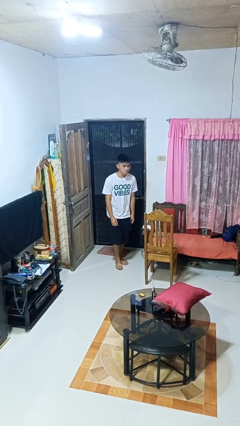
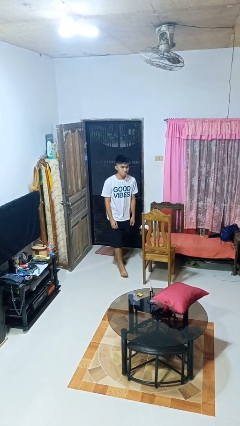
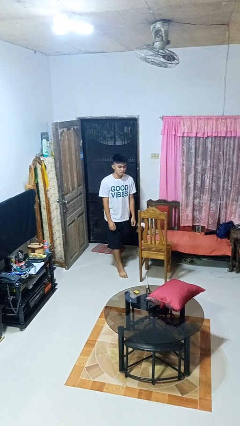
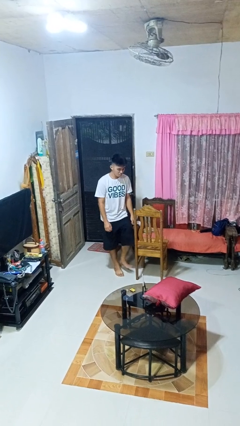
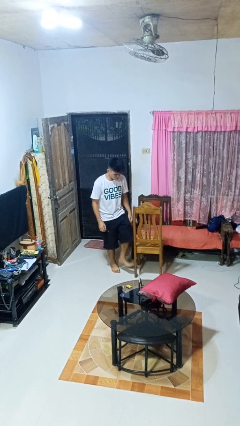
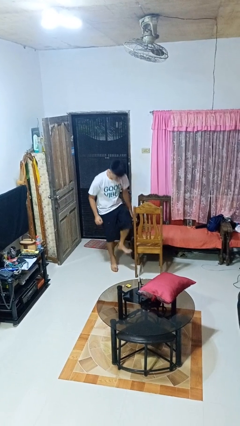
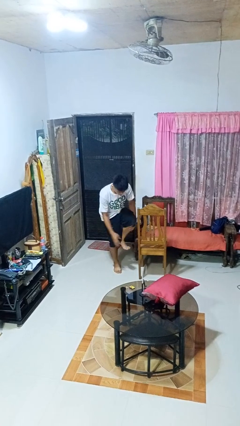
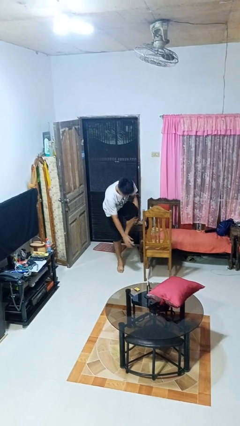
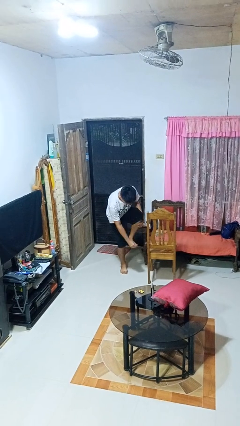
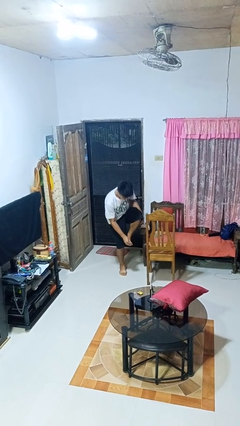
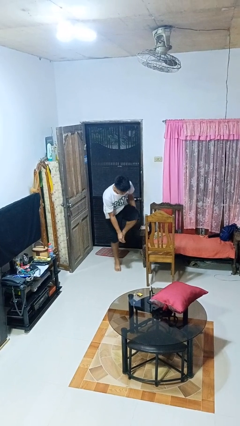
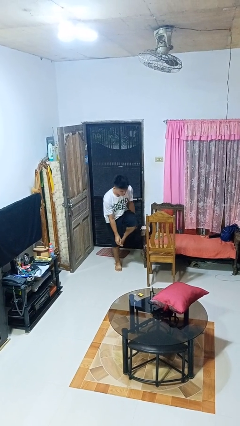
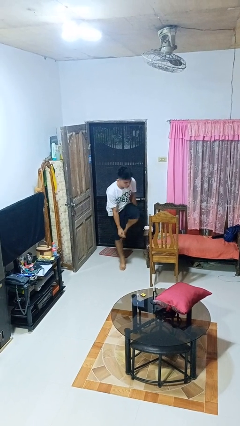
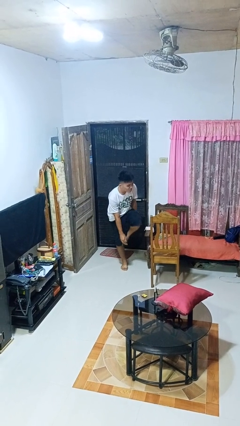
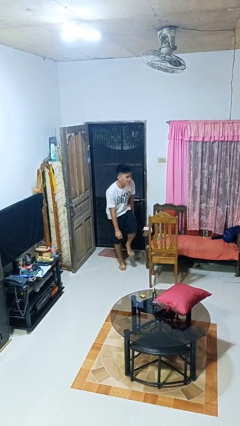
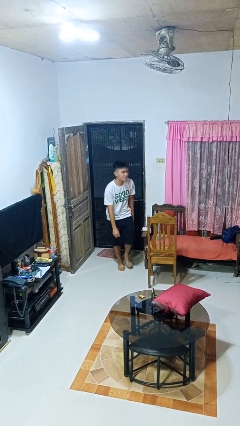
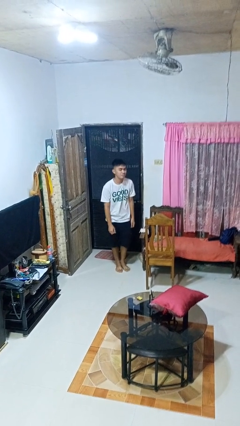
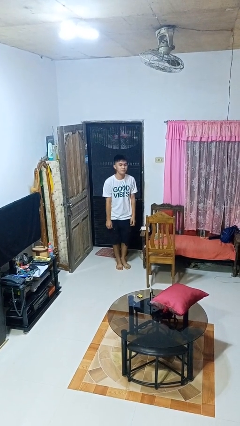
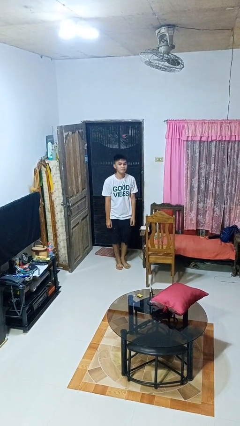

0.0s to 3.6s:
person stubs toe

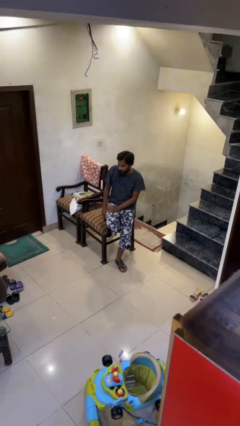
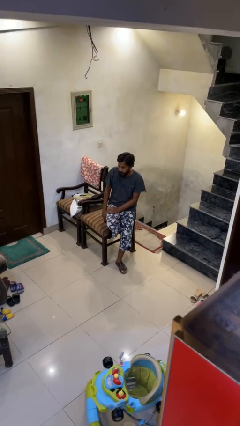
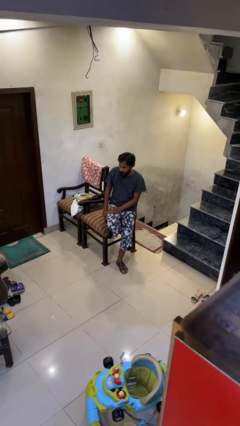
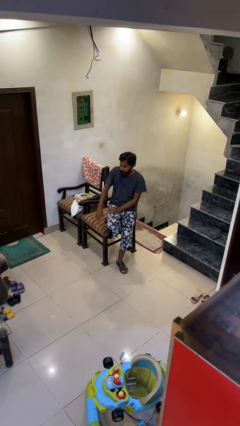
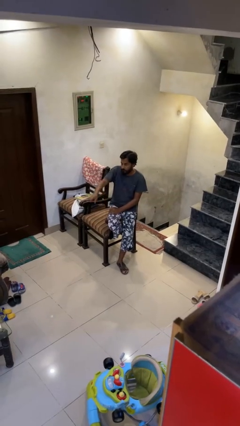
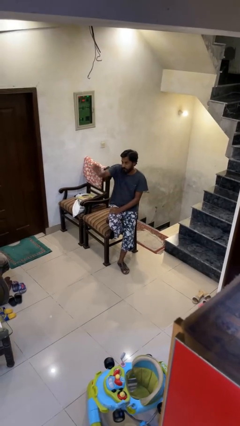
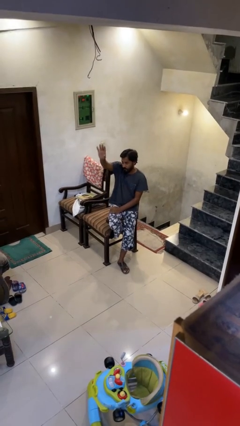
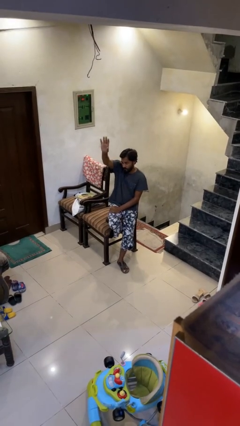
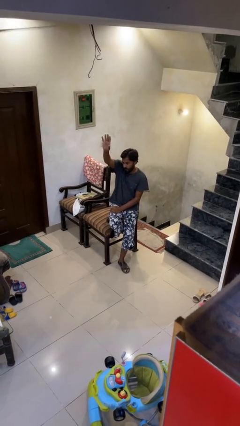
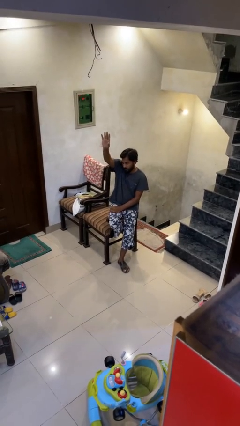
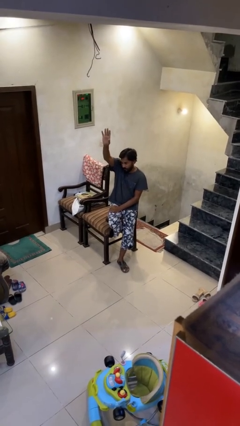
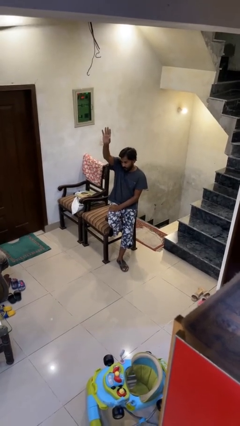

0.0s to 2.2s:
person gestures raise hand

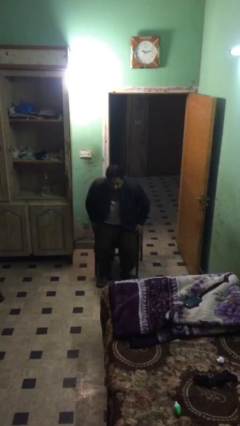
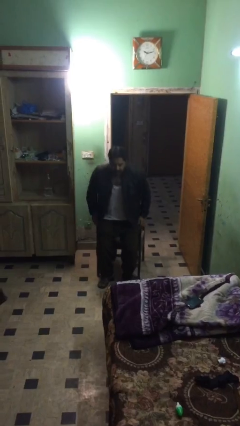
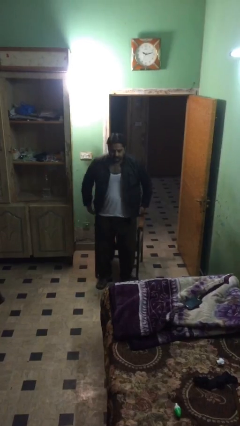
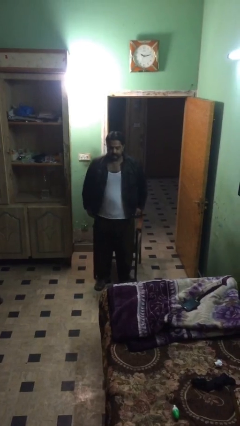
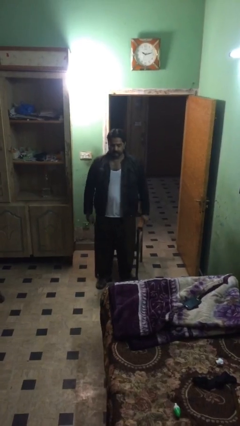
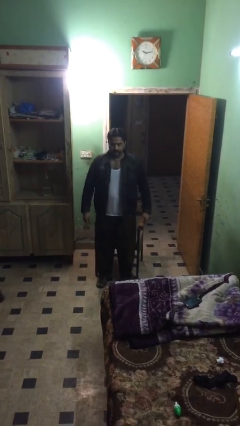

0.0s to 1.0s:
person stands up

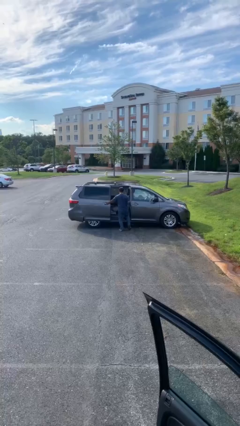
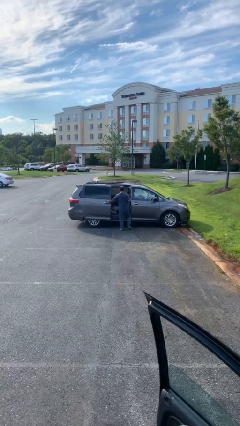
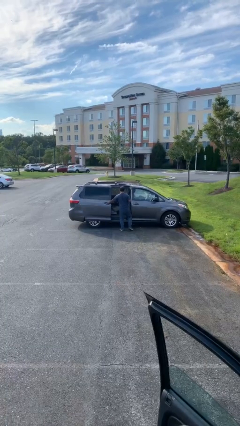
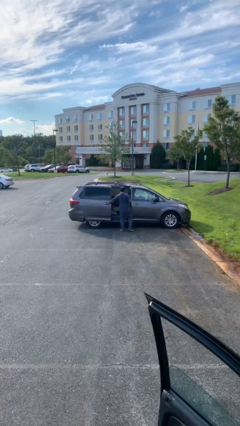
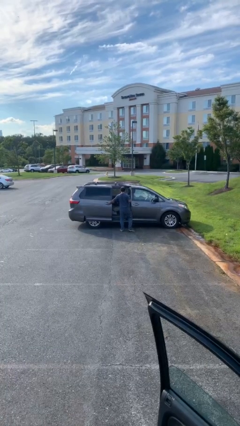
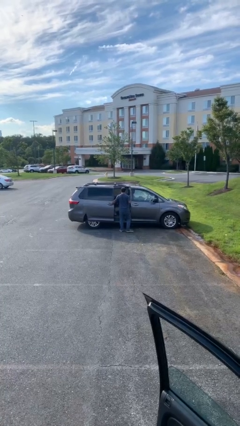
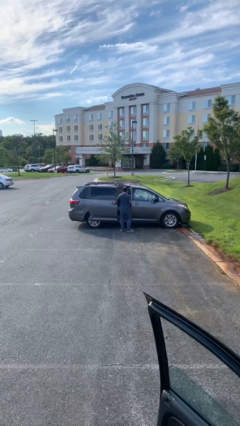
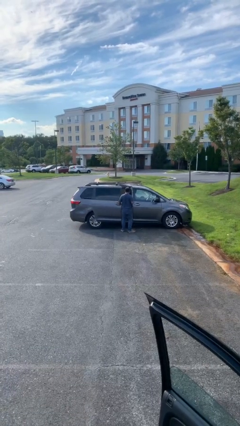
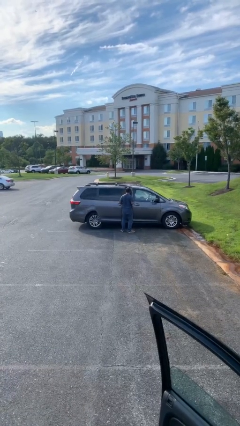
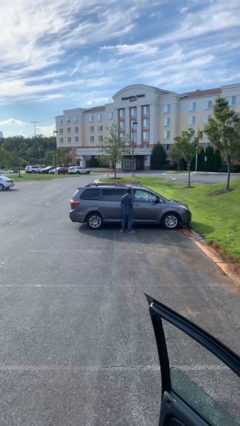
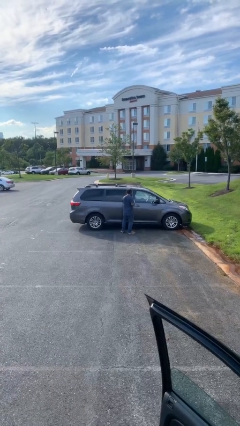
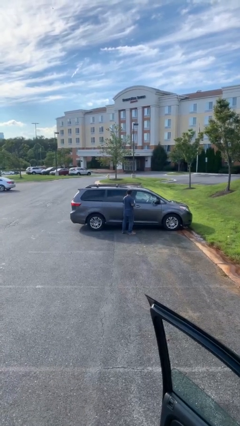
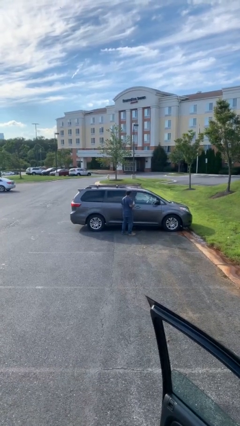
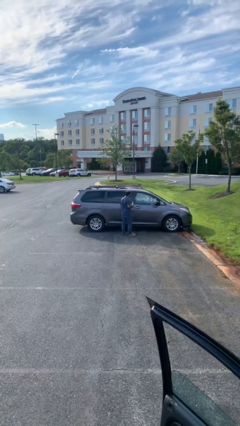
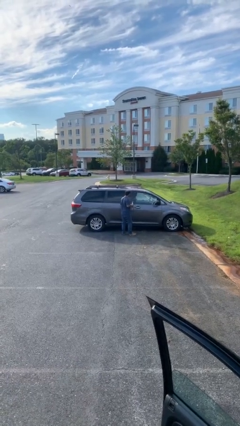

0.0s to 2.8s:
person closes car door

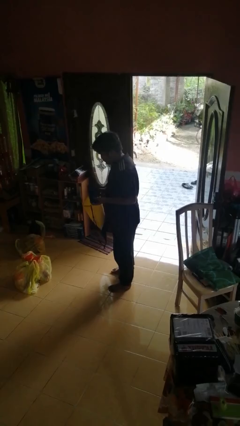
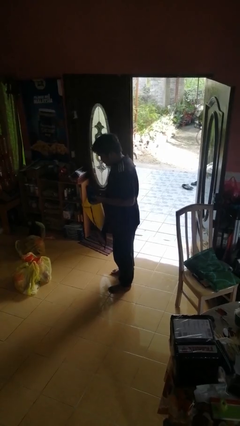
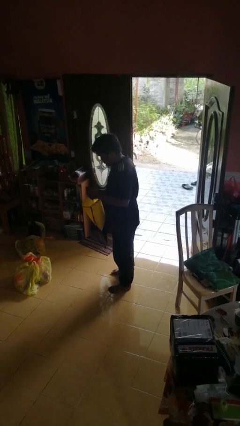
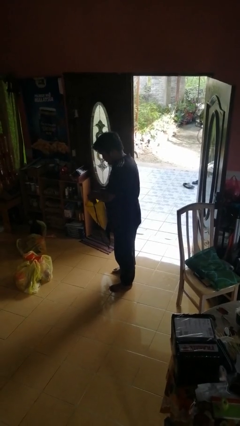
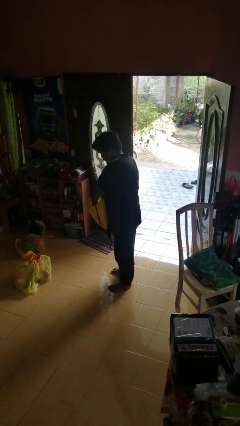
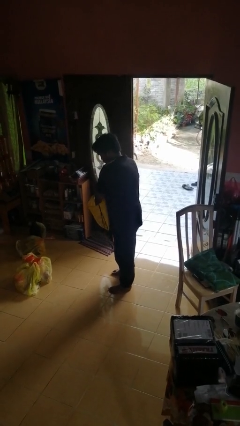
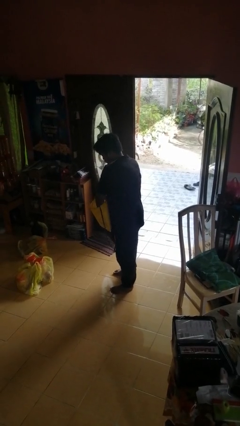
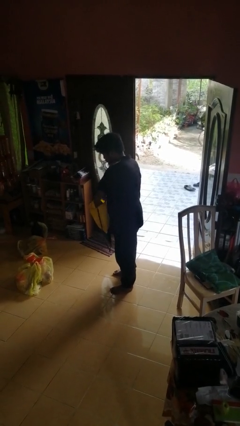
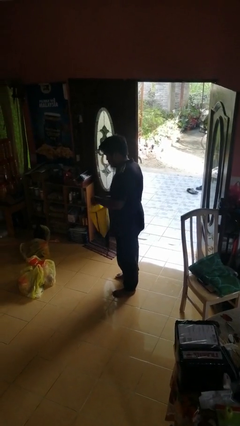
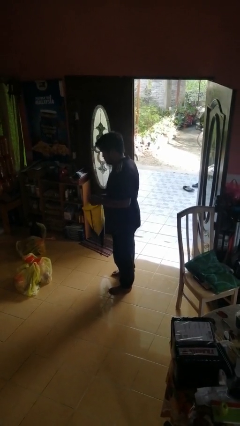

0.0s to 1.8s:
person puts object into bag

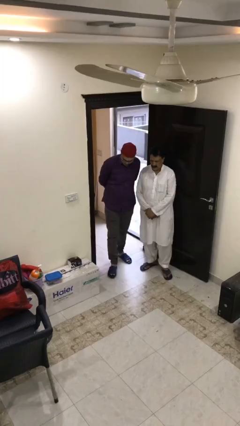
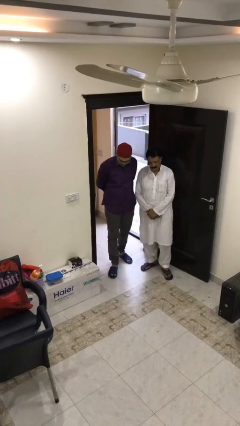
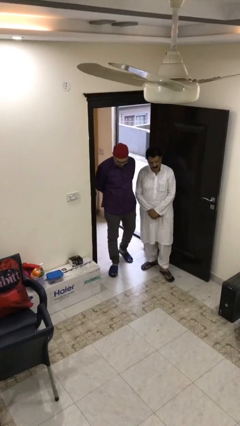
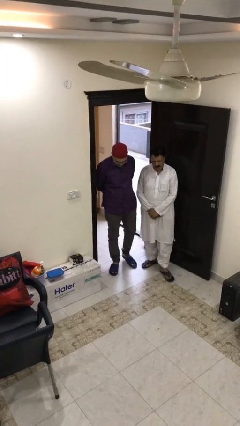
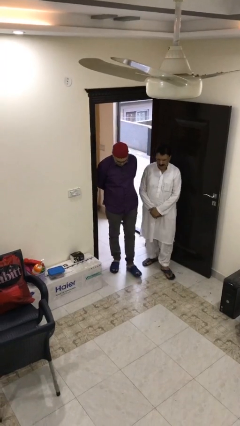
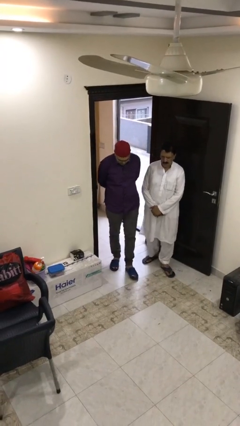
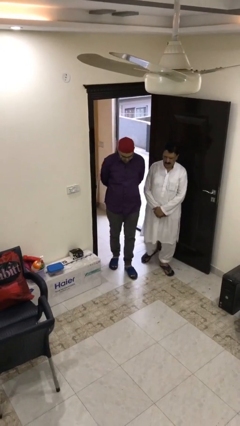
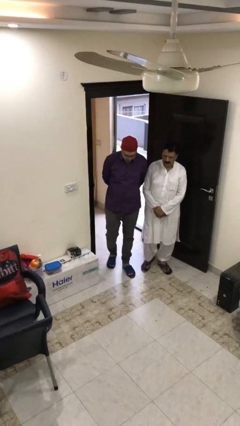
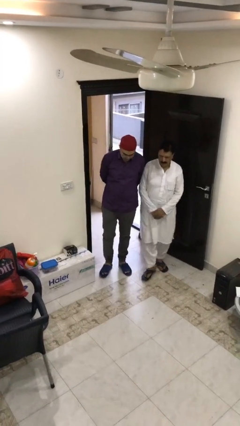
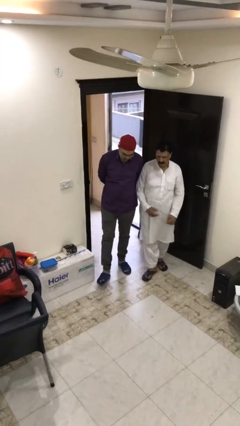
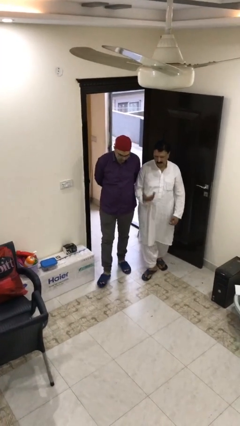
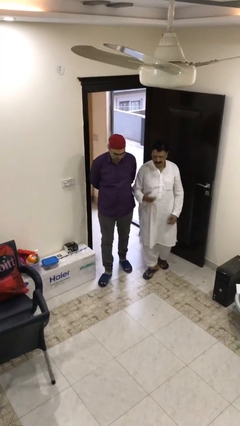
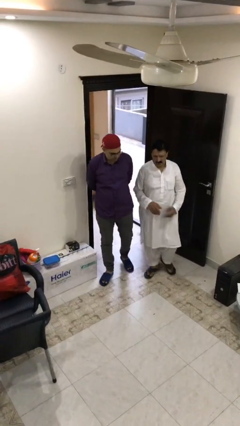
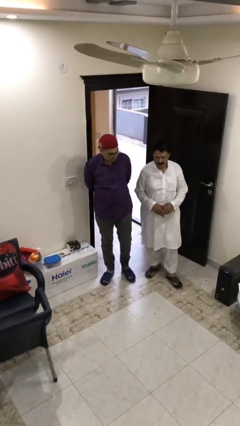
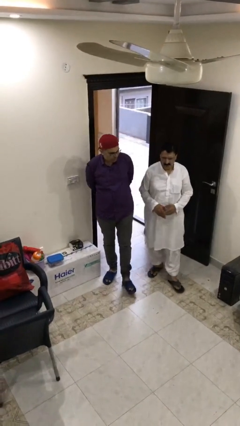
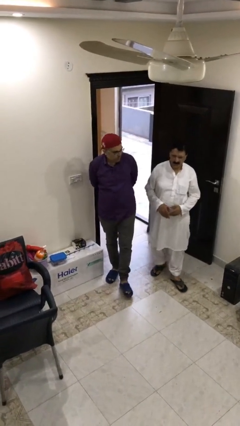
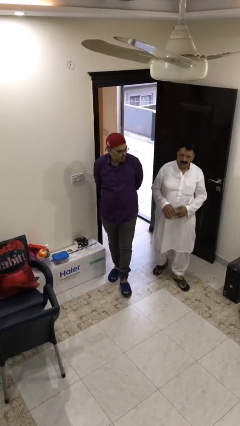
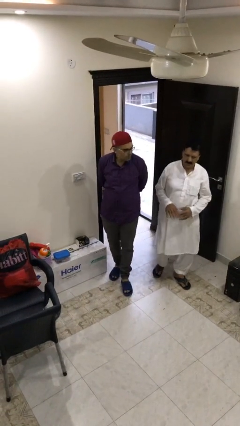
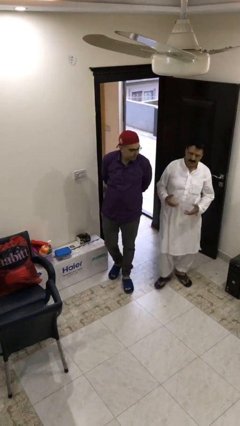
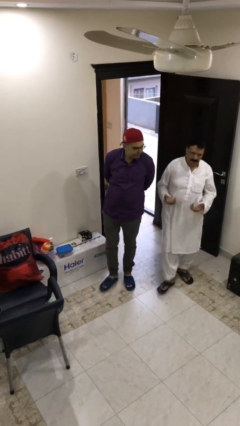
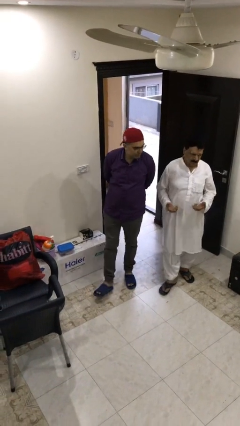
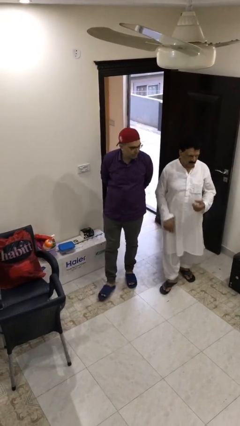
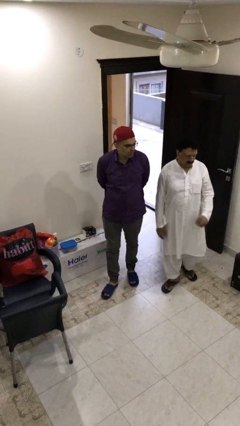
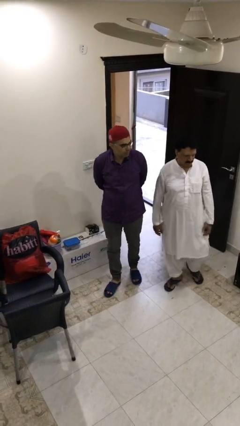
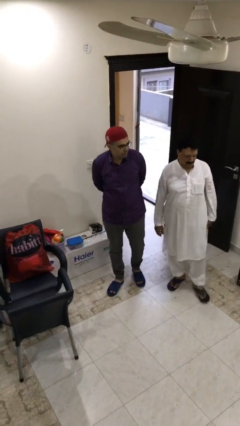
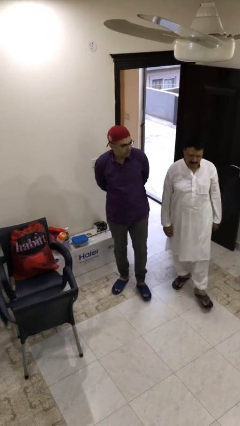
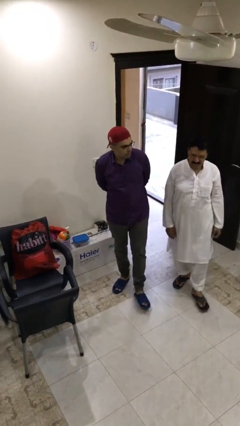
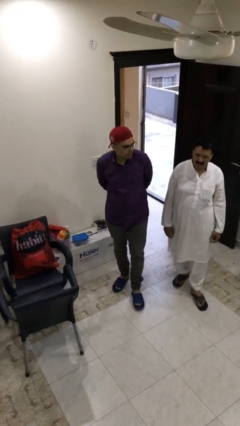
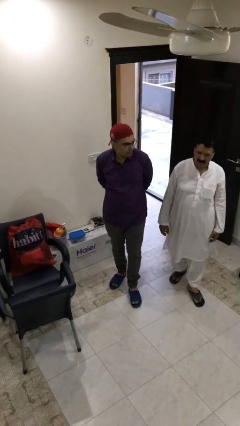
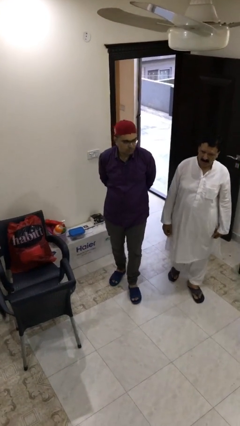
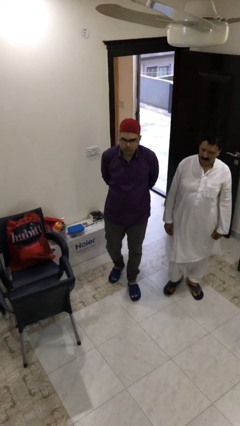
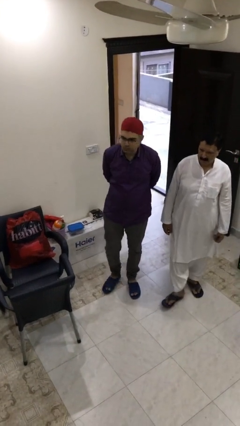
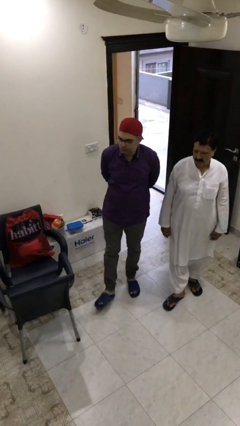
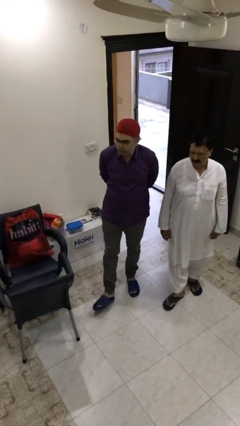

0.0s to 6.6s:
person talks to person
